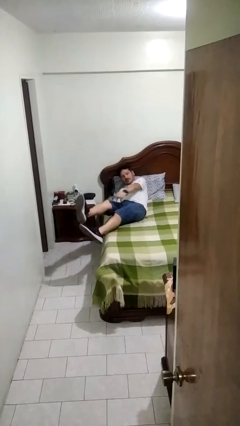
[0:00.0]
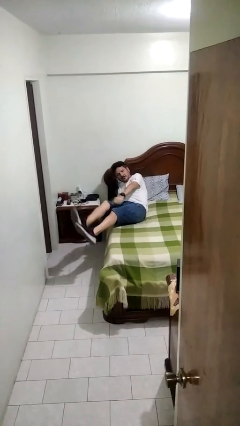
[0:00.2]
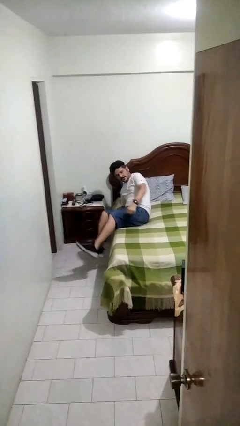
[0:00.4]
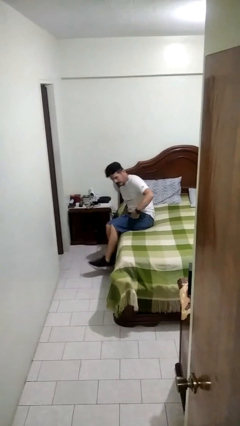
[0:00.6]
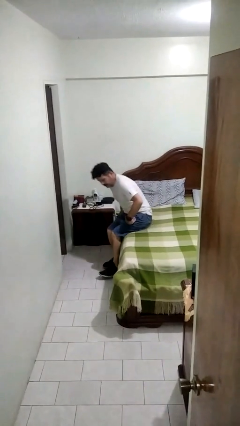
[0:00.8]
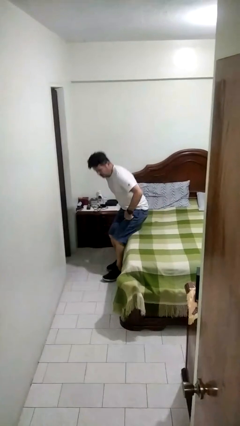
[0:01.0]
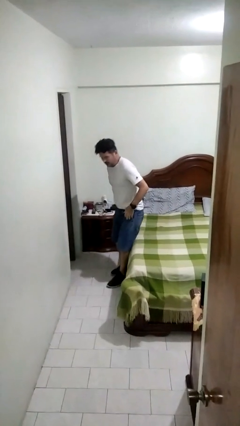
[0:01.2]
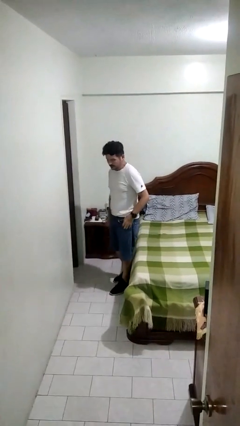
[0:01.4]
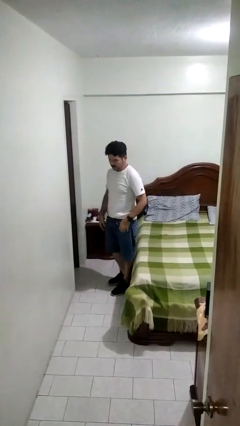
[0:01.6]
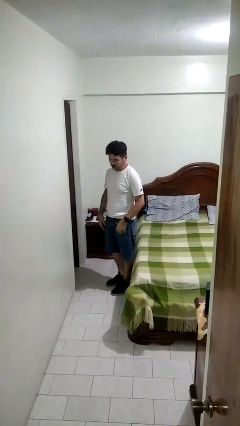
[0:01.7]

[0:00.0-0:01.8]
person stands up

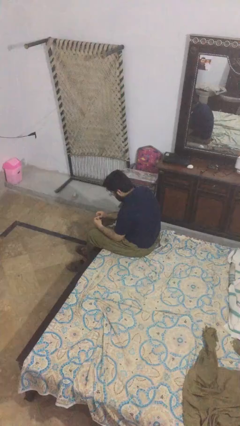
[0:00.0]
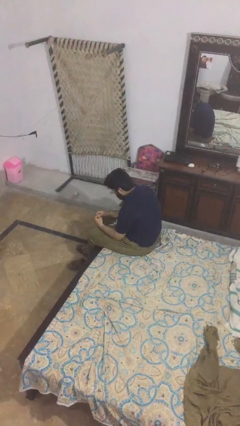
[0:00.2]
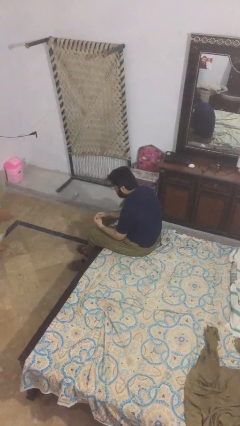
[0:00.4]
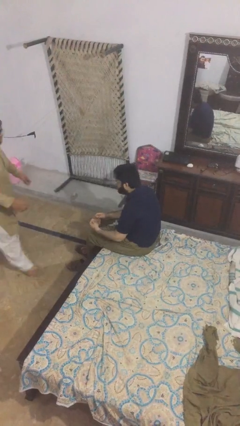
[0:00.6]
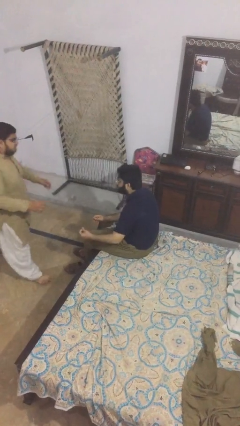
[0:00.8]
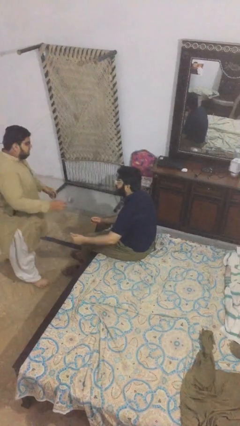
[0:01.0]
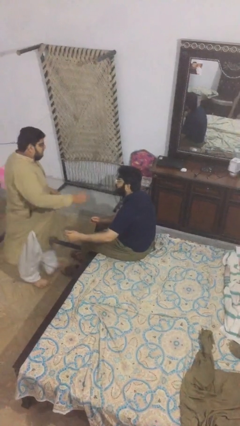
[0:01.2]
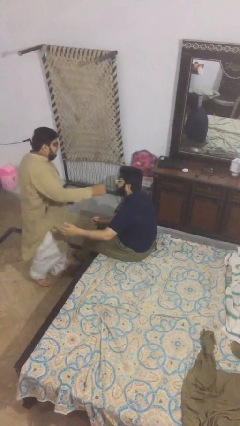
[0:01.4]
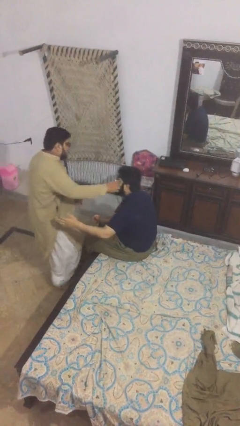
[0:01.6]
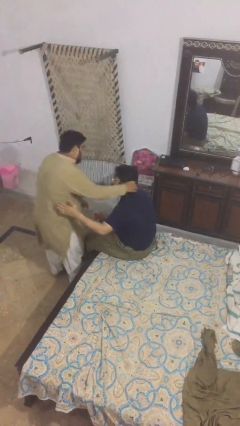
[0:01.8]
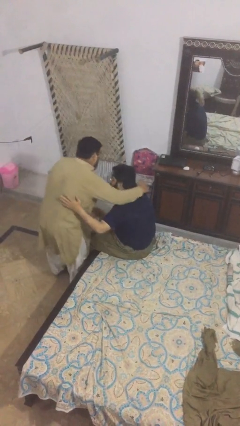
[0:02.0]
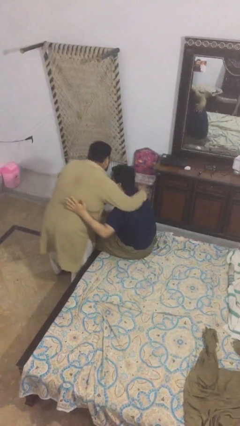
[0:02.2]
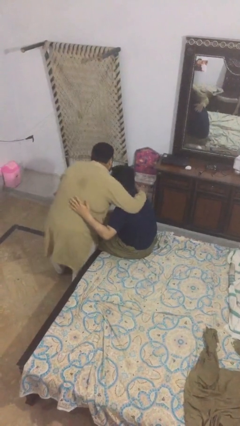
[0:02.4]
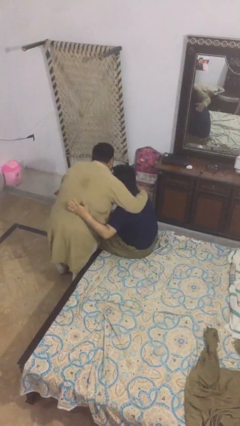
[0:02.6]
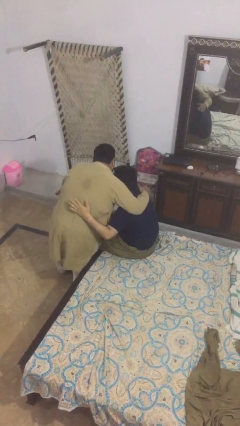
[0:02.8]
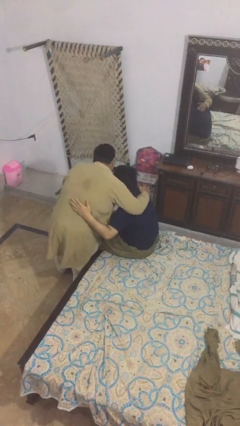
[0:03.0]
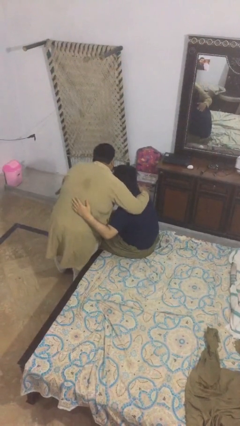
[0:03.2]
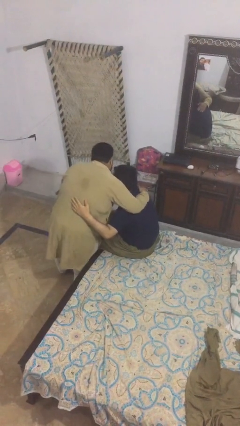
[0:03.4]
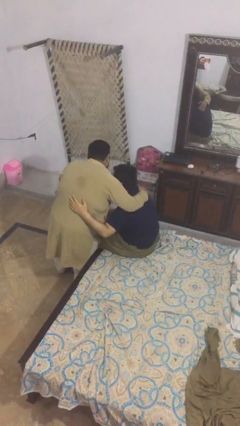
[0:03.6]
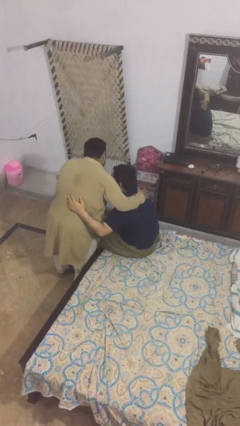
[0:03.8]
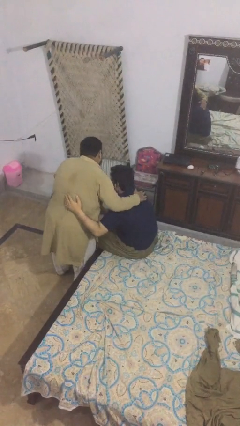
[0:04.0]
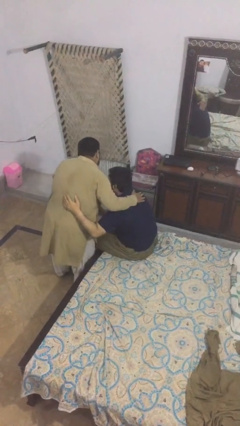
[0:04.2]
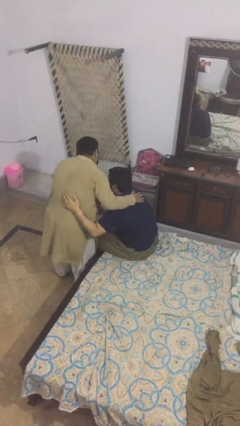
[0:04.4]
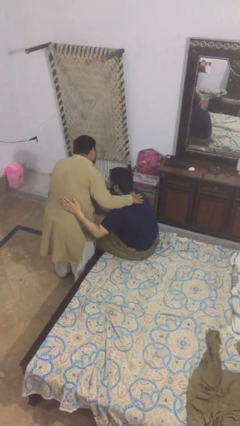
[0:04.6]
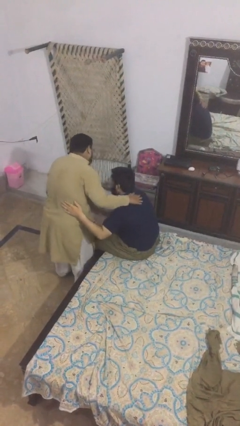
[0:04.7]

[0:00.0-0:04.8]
person embraces person

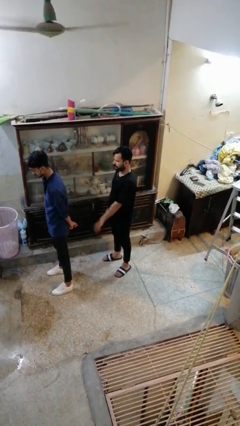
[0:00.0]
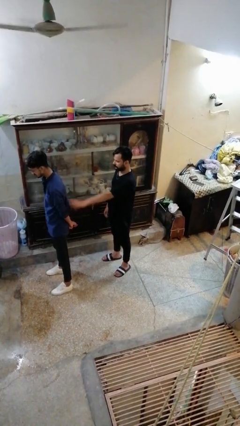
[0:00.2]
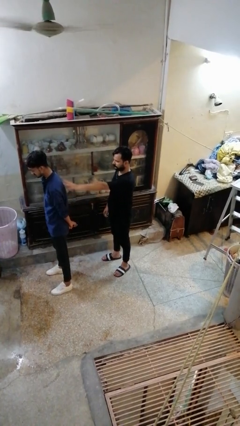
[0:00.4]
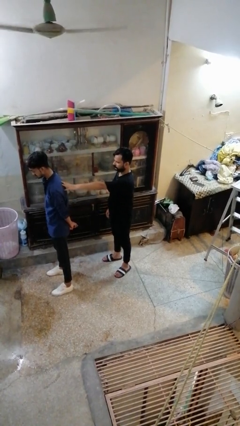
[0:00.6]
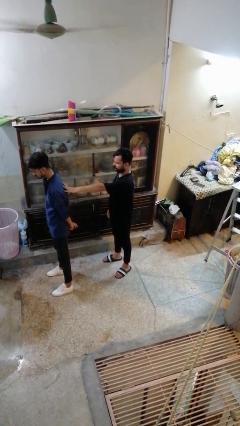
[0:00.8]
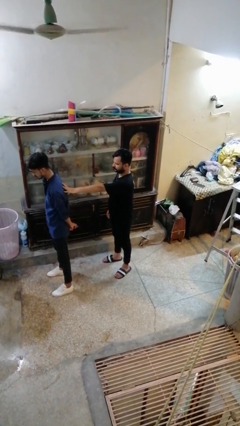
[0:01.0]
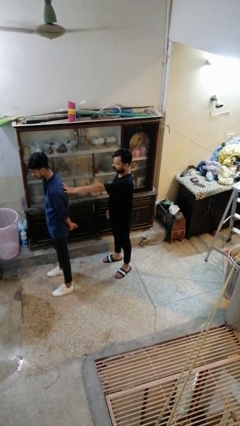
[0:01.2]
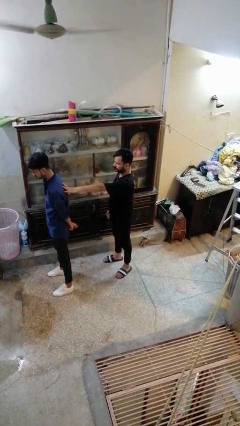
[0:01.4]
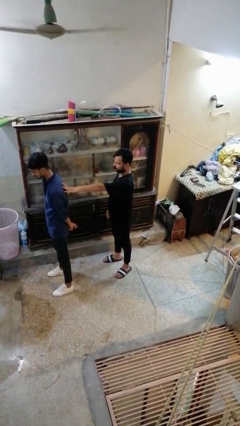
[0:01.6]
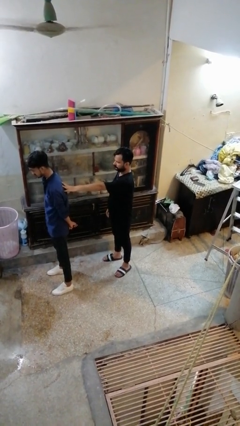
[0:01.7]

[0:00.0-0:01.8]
person touches back of person

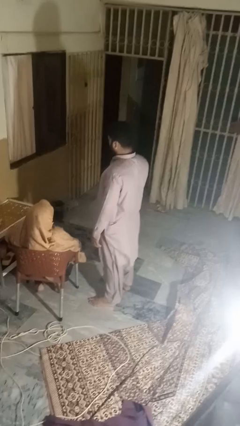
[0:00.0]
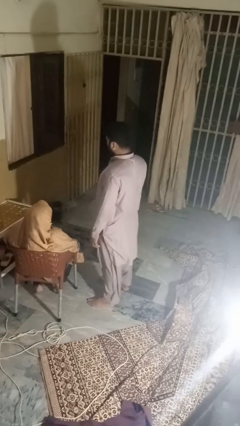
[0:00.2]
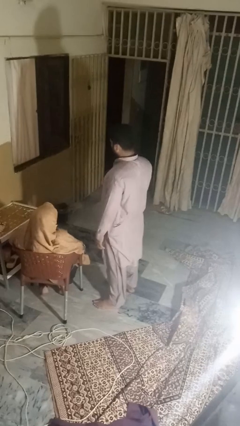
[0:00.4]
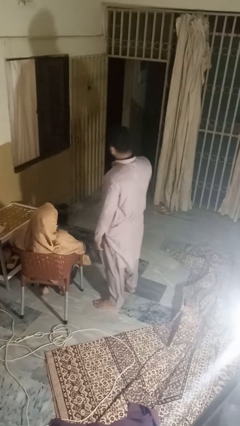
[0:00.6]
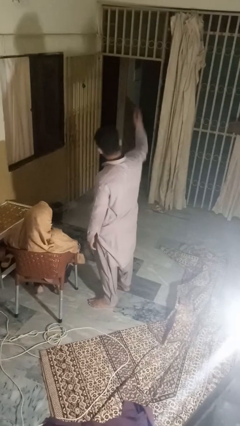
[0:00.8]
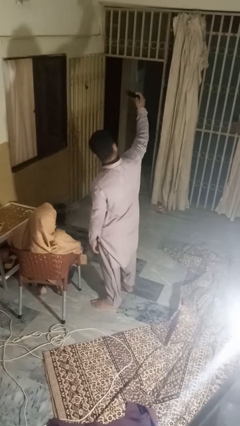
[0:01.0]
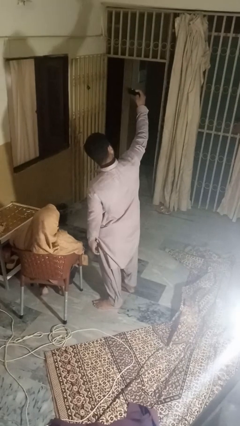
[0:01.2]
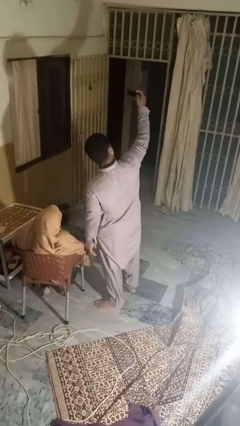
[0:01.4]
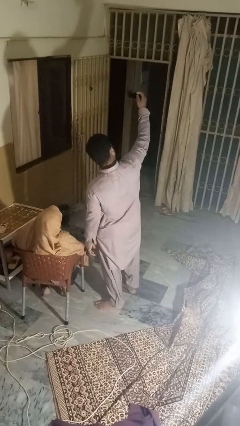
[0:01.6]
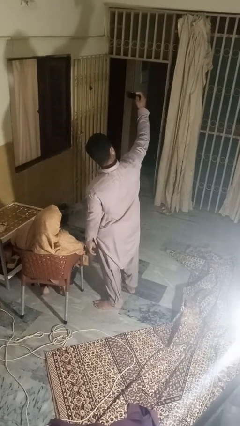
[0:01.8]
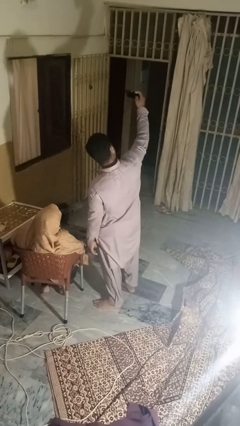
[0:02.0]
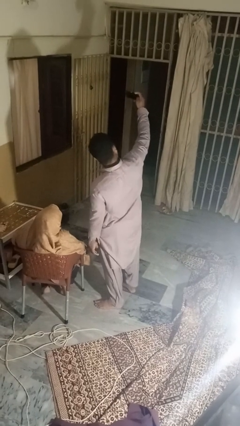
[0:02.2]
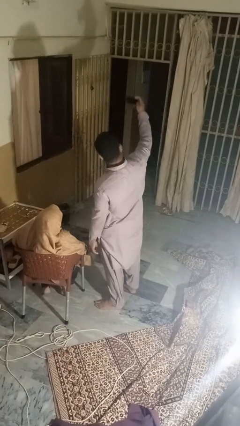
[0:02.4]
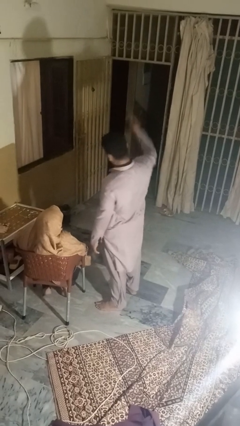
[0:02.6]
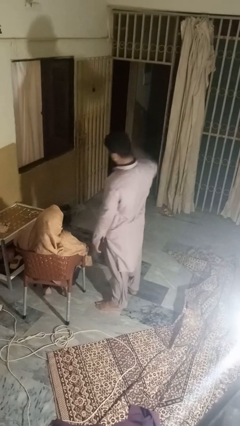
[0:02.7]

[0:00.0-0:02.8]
person takes selfie with person

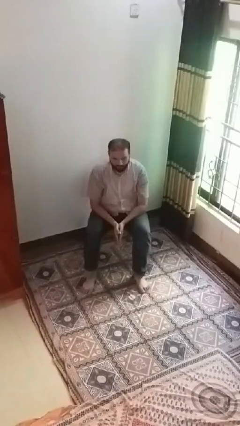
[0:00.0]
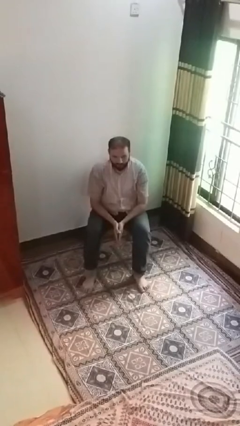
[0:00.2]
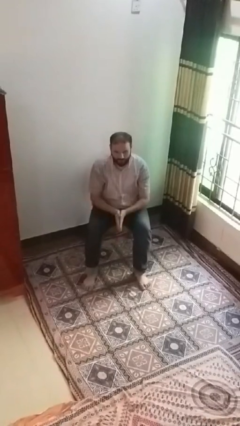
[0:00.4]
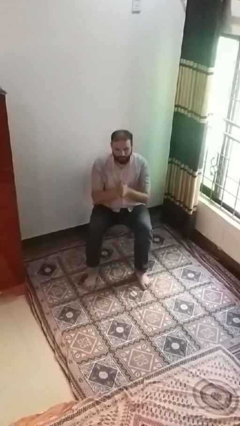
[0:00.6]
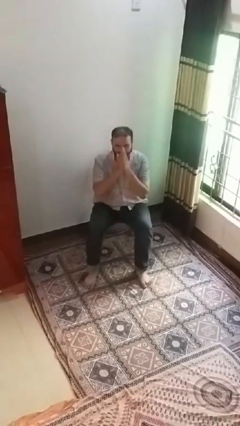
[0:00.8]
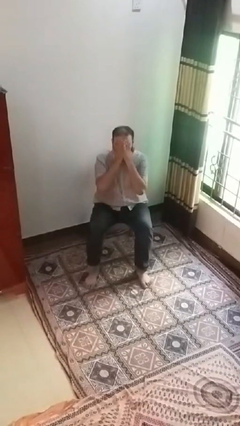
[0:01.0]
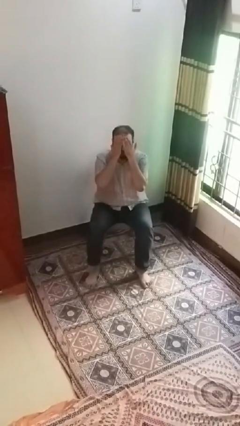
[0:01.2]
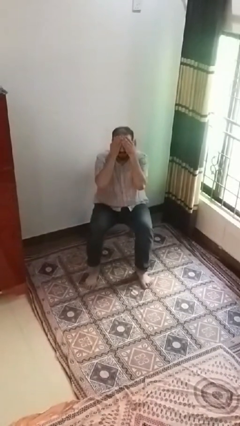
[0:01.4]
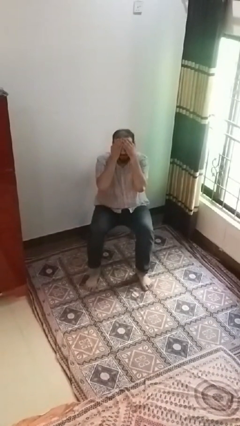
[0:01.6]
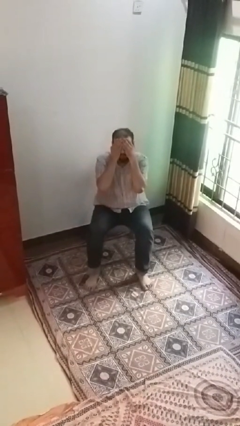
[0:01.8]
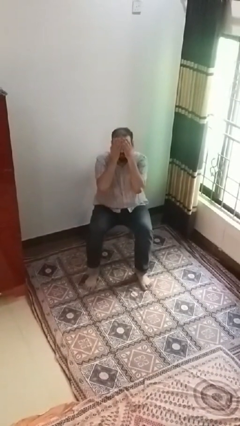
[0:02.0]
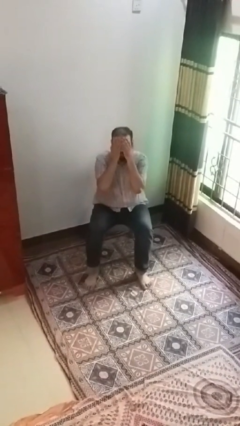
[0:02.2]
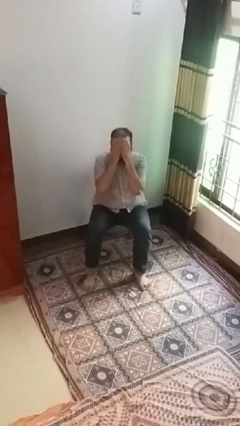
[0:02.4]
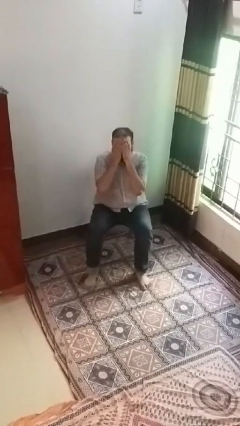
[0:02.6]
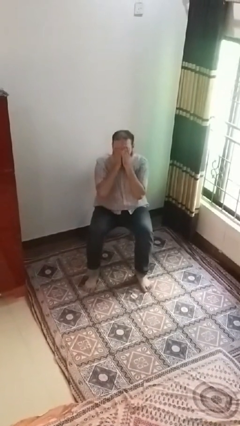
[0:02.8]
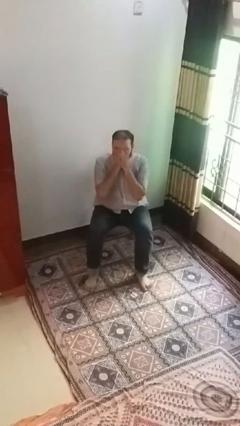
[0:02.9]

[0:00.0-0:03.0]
person covers face with hands

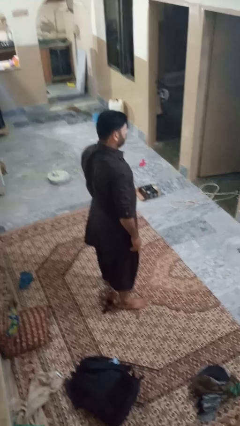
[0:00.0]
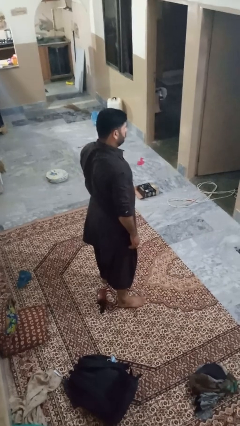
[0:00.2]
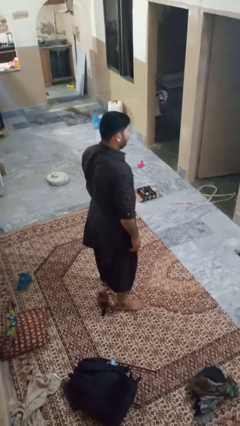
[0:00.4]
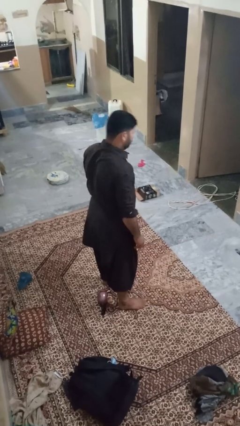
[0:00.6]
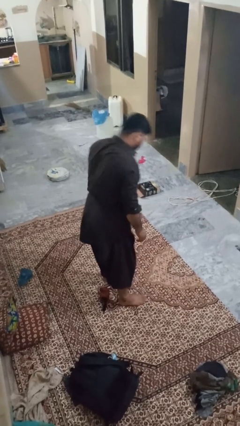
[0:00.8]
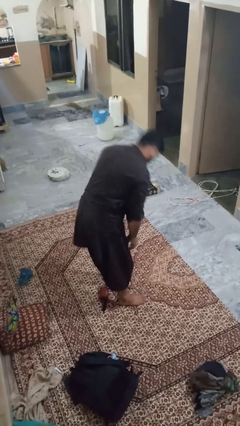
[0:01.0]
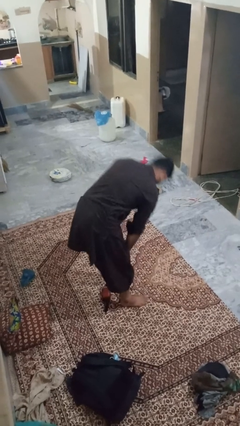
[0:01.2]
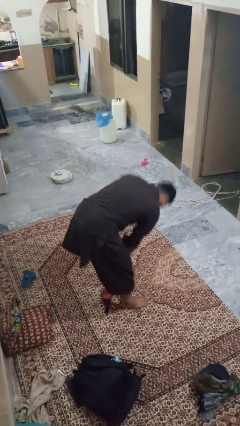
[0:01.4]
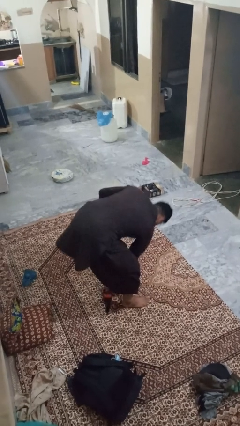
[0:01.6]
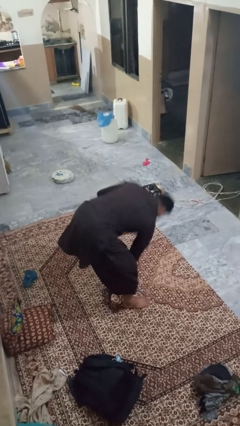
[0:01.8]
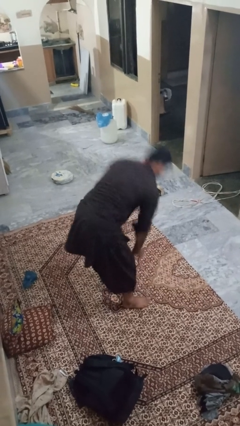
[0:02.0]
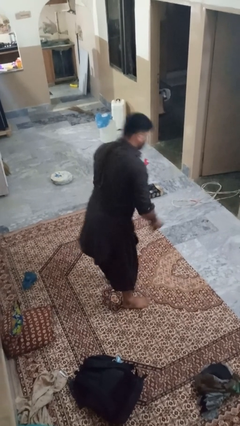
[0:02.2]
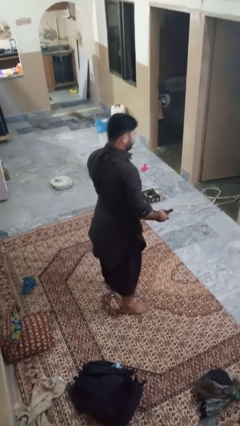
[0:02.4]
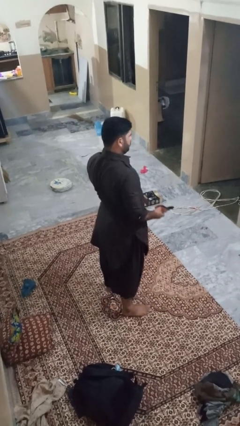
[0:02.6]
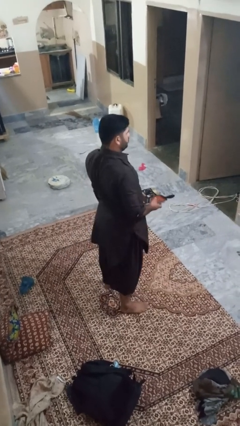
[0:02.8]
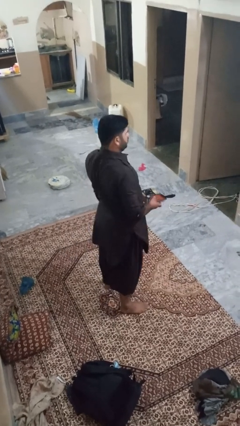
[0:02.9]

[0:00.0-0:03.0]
person picks up object from floor

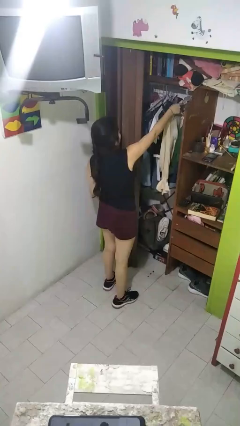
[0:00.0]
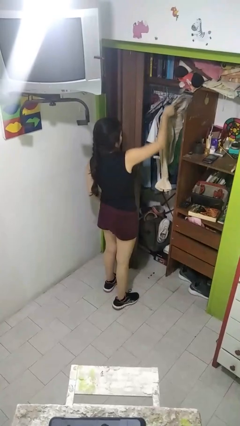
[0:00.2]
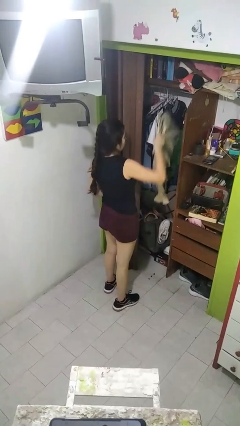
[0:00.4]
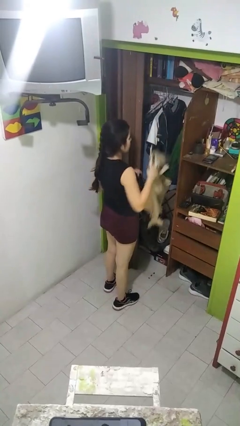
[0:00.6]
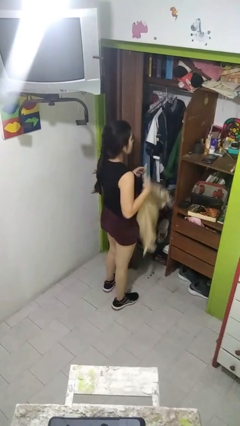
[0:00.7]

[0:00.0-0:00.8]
person takes clothes from closet
